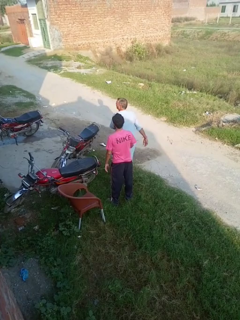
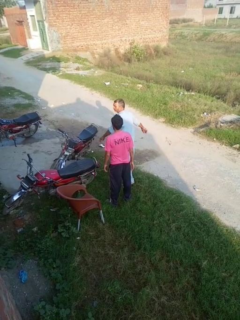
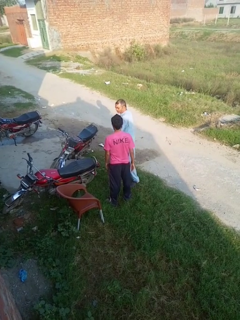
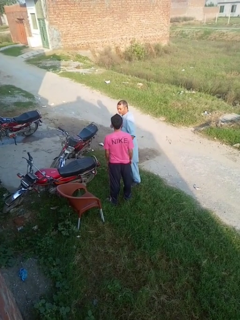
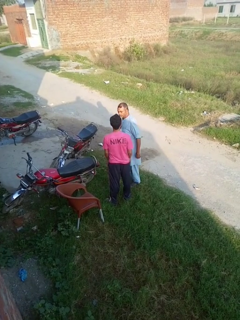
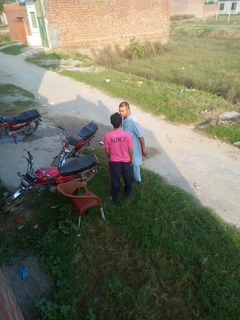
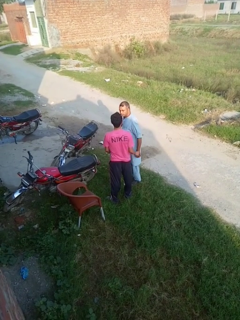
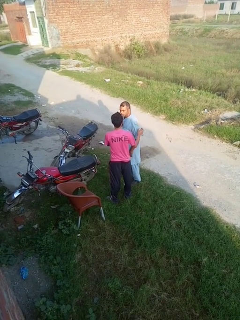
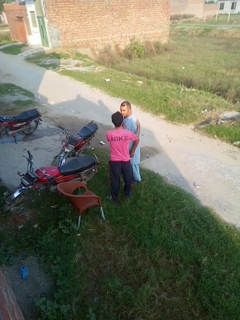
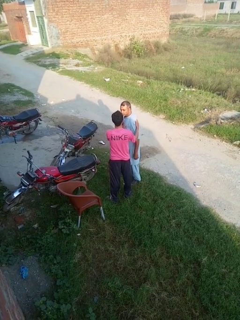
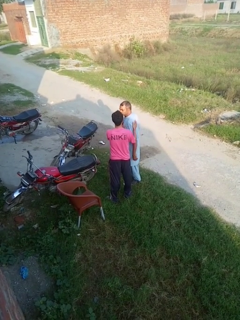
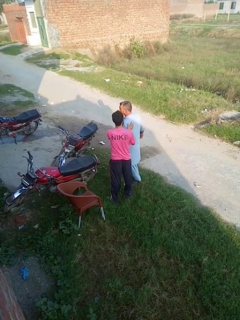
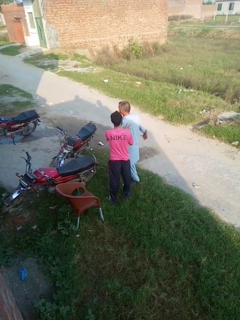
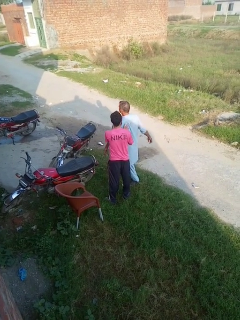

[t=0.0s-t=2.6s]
person grabs person by shoulder

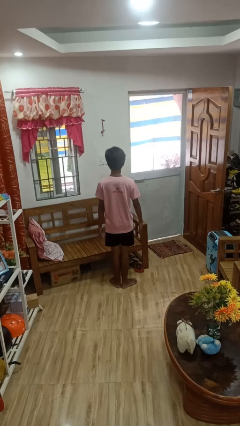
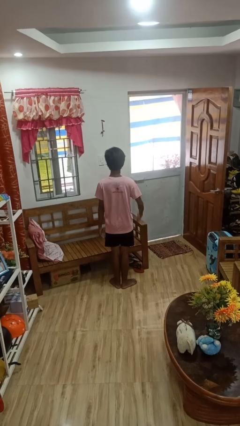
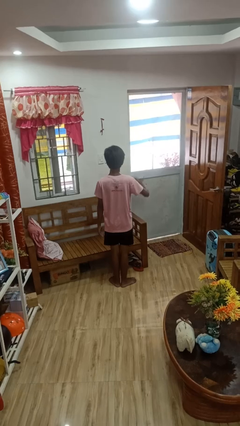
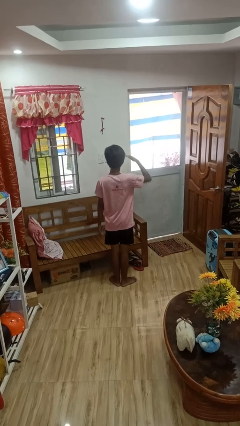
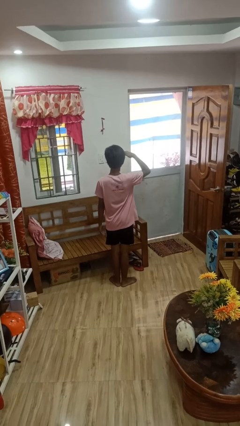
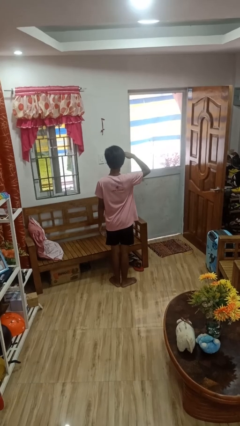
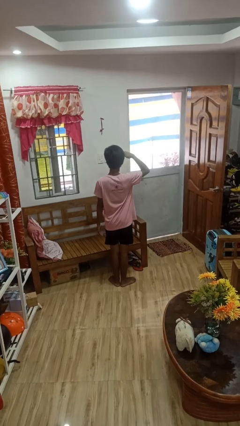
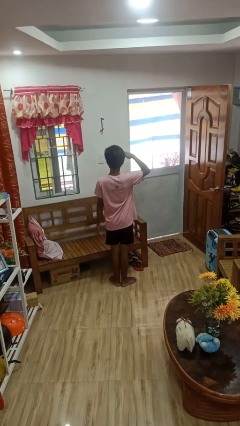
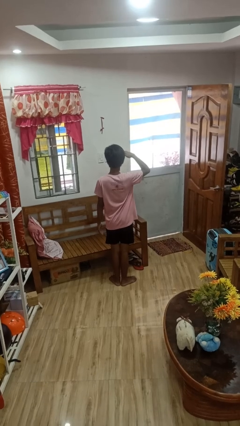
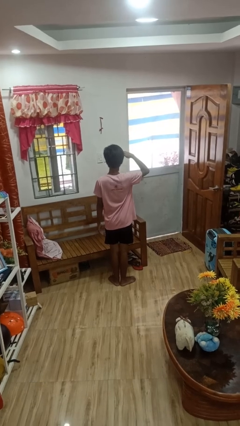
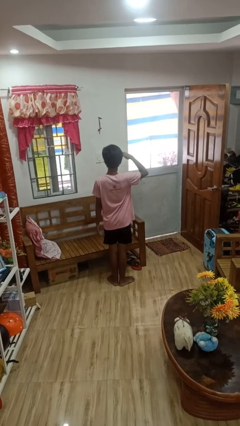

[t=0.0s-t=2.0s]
person salutes

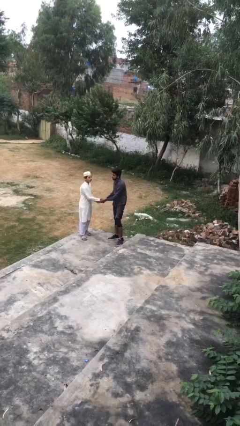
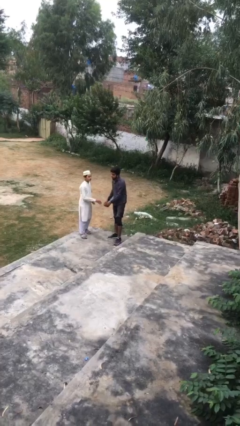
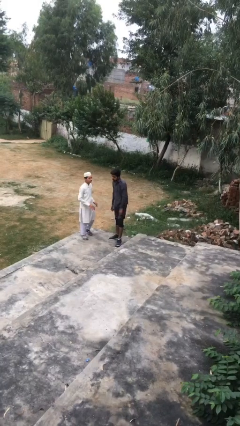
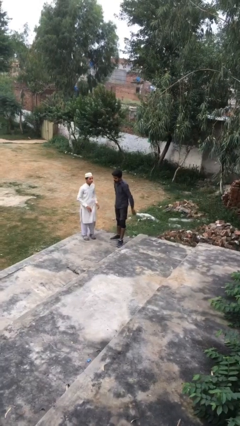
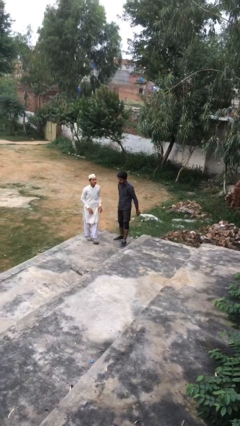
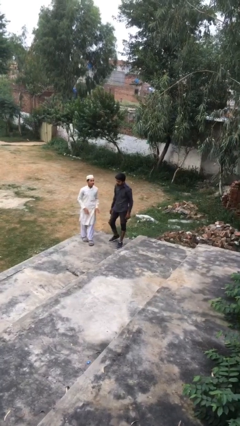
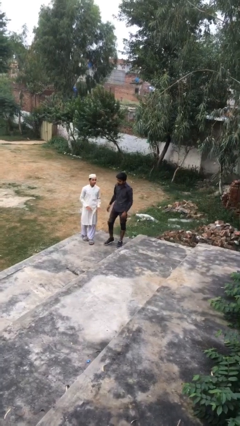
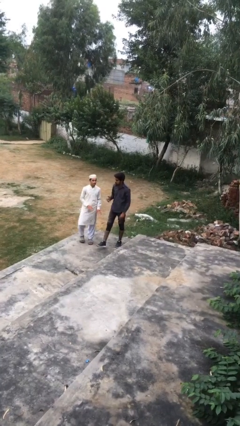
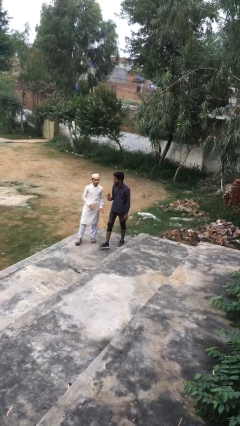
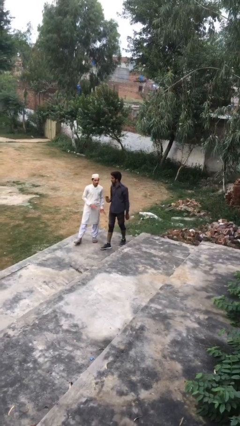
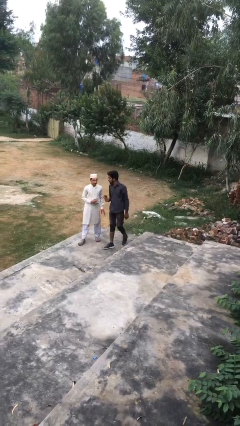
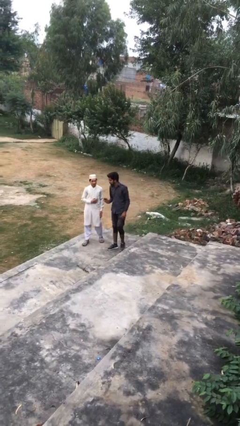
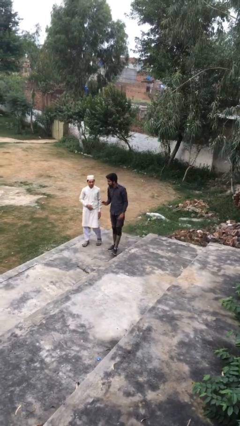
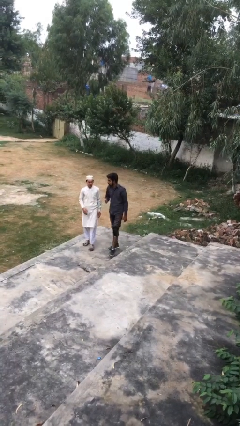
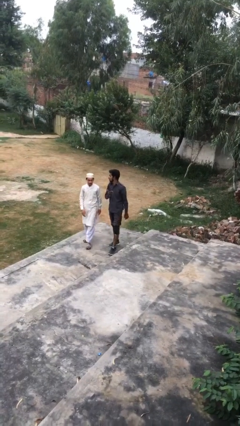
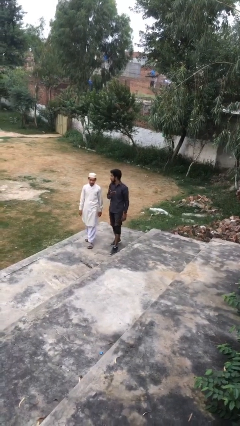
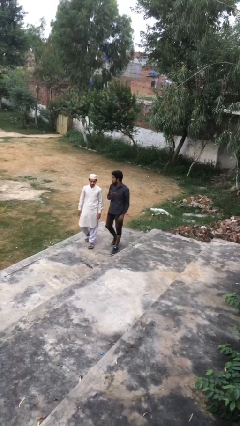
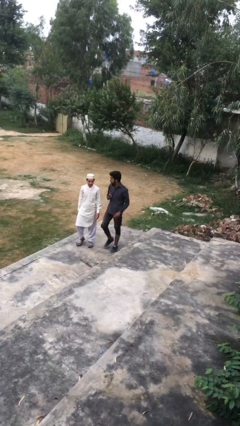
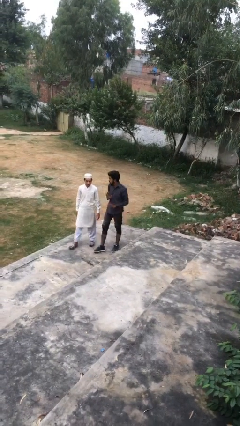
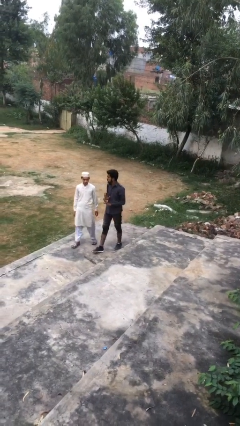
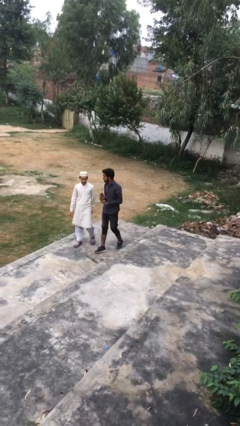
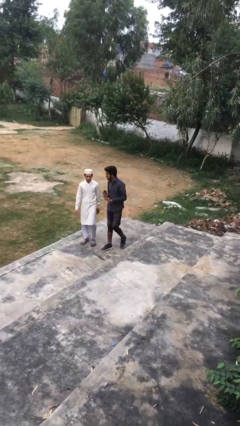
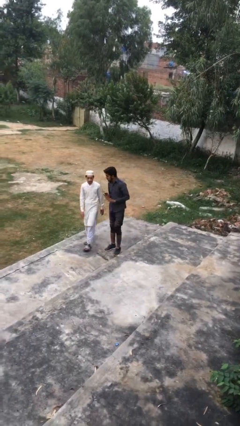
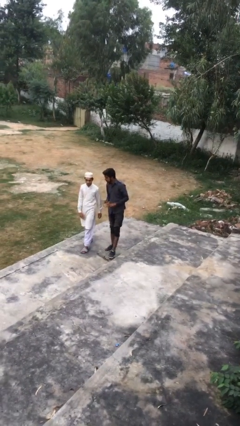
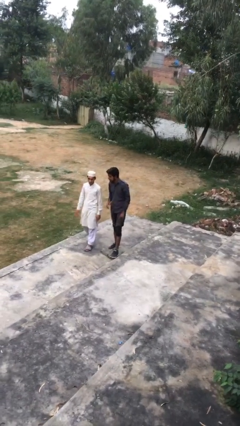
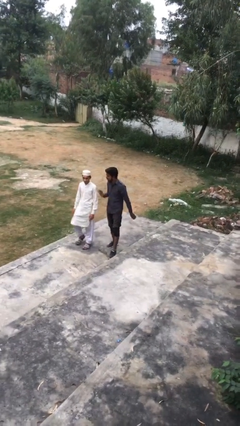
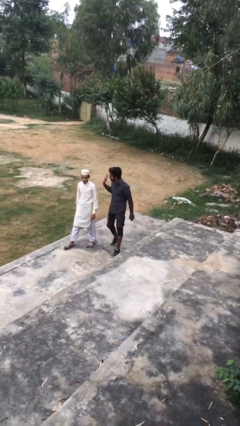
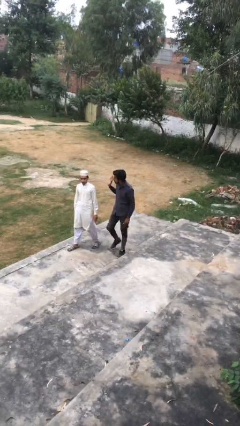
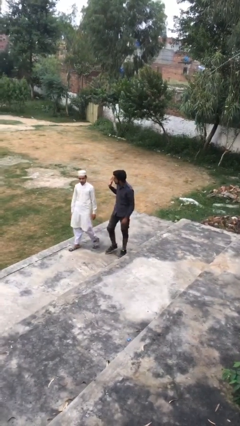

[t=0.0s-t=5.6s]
person talks to person

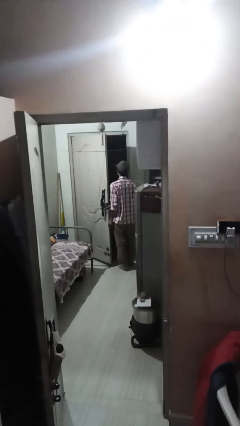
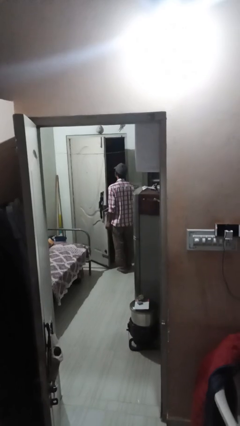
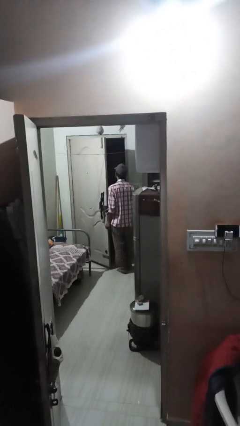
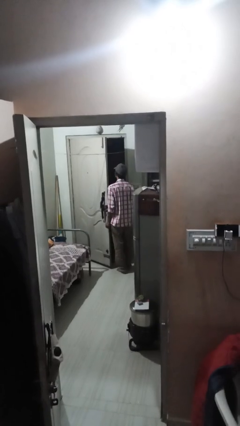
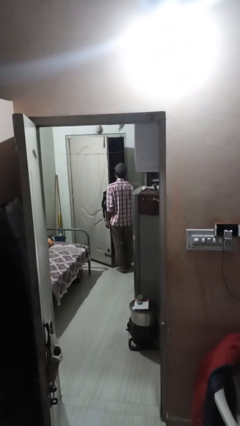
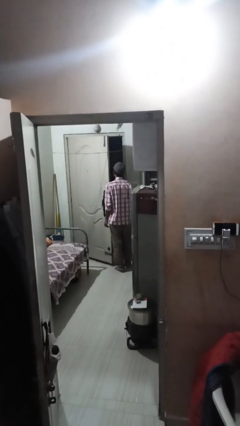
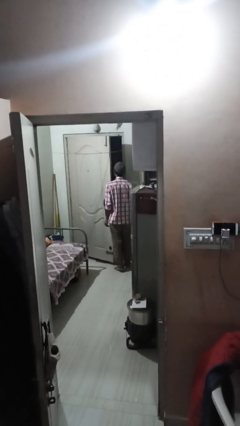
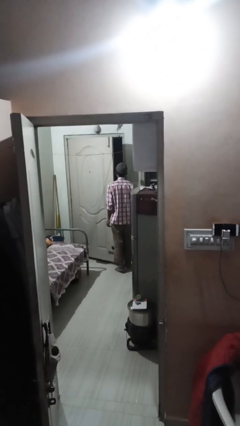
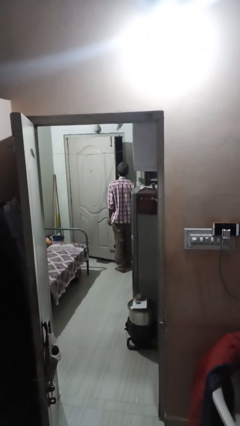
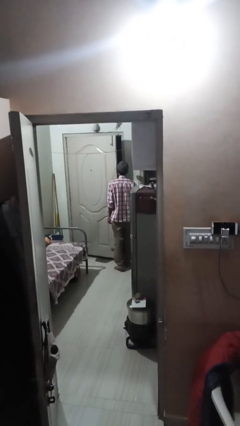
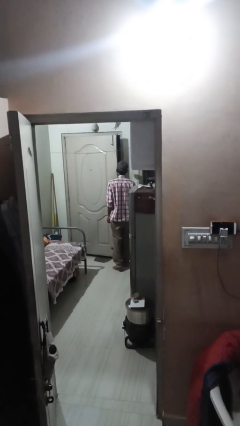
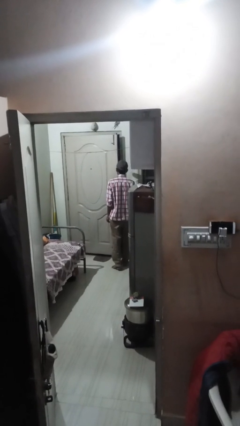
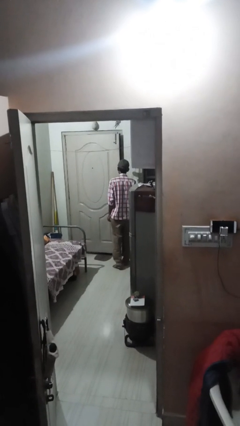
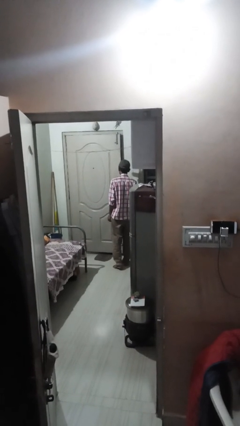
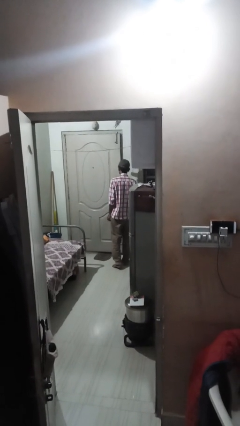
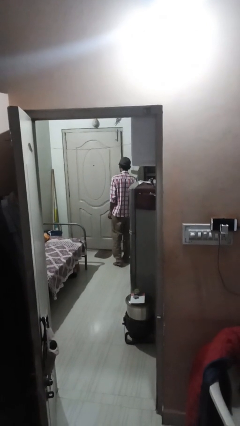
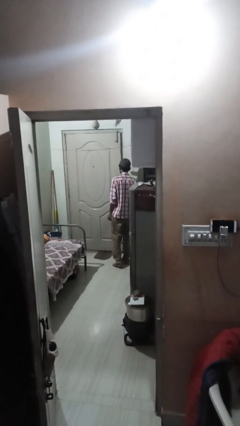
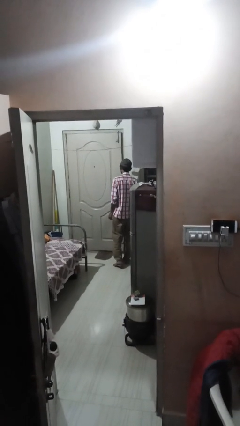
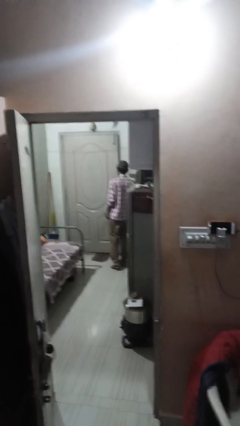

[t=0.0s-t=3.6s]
person closes facility door

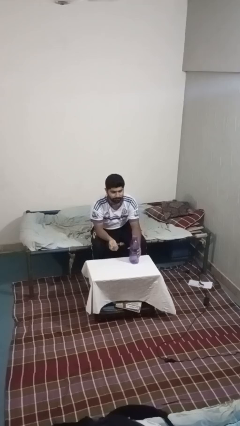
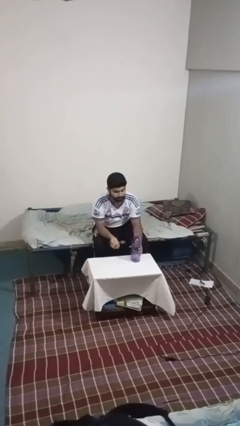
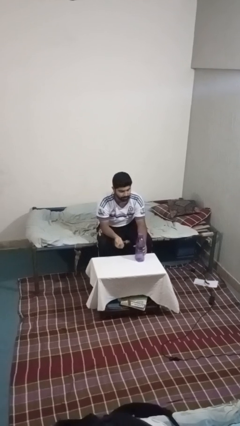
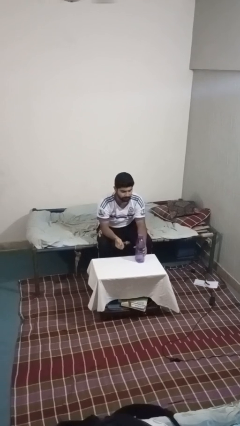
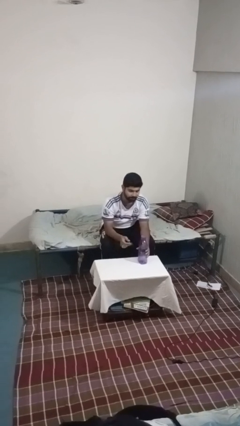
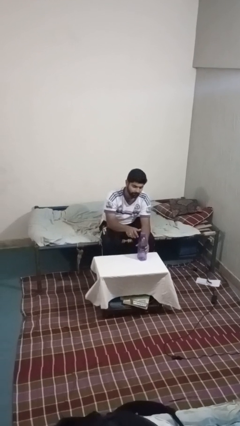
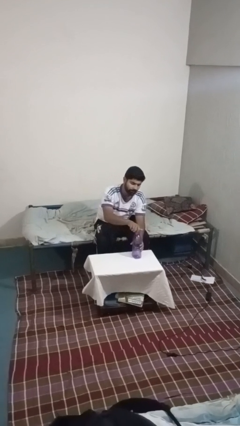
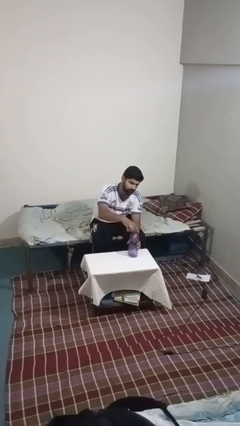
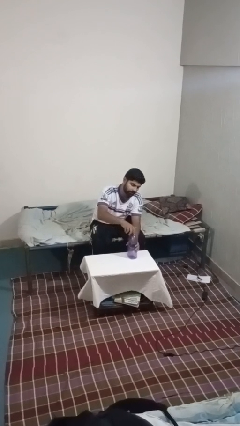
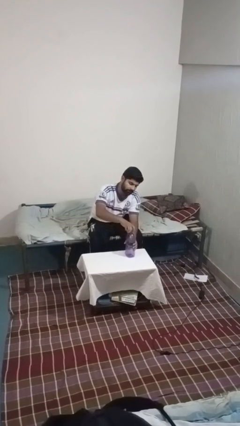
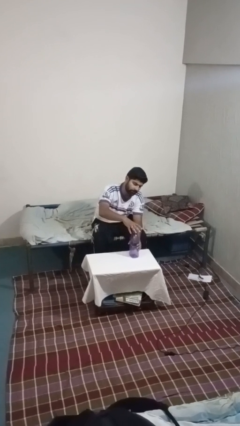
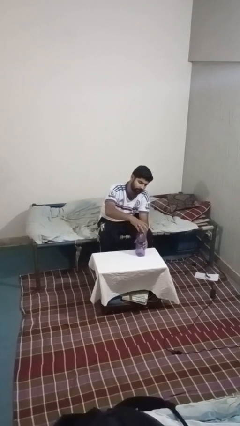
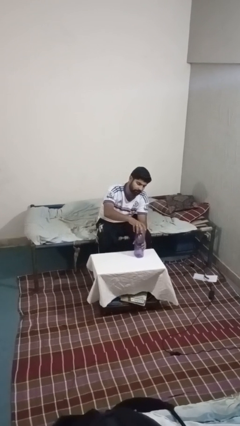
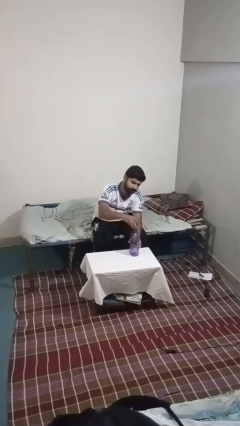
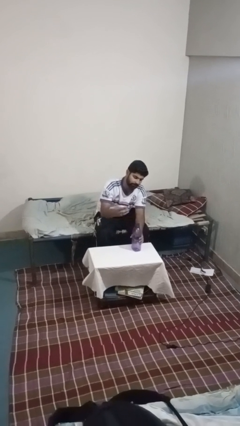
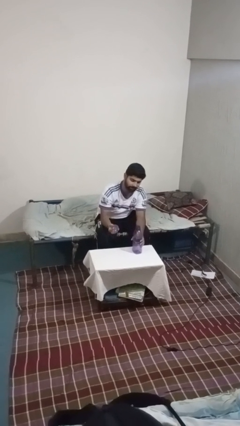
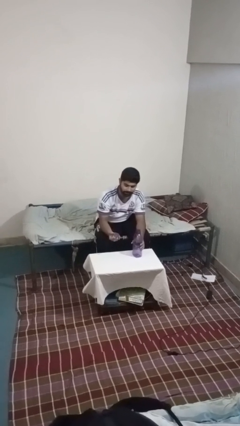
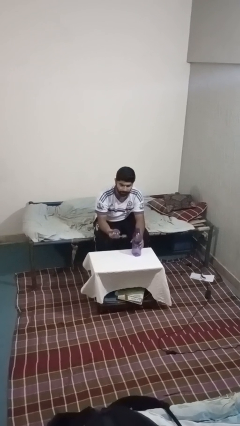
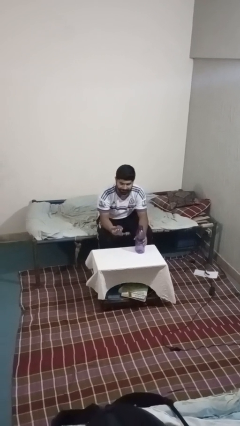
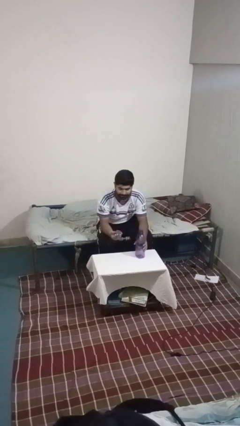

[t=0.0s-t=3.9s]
person unscrews lid from bottle

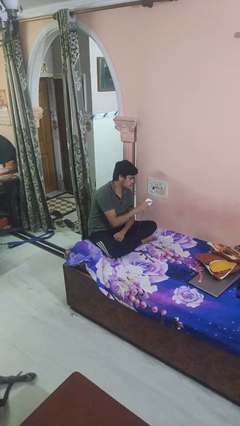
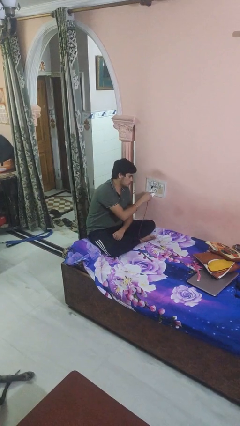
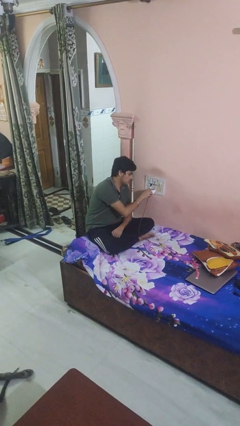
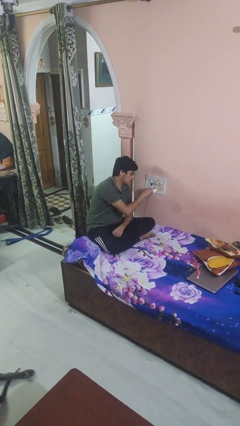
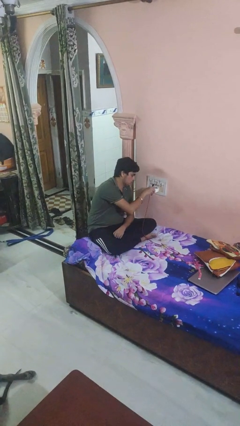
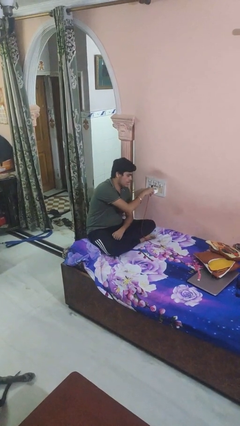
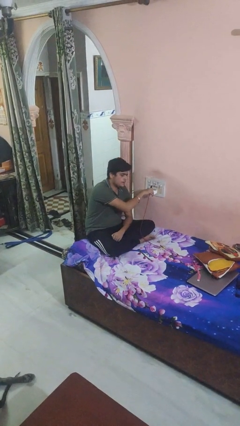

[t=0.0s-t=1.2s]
person plugs into electrical socket
